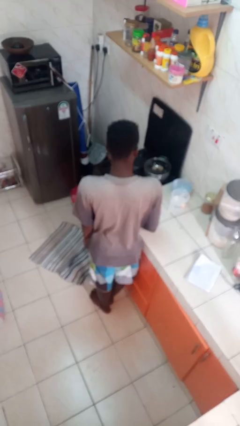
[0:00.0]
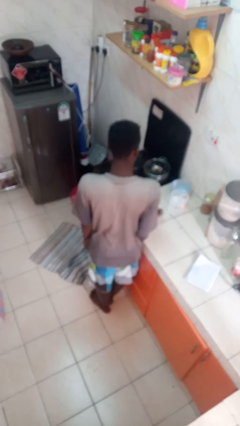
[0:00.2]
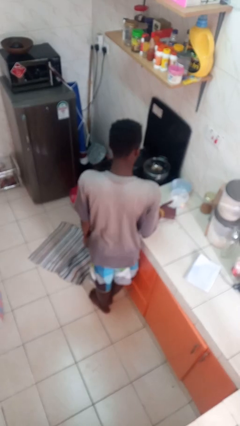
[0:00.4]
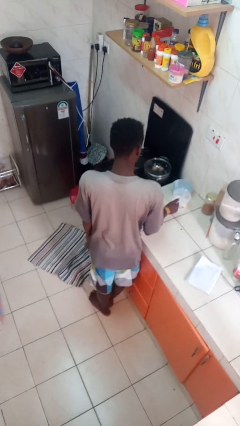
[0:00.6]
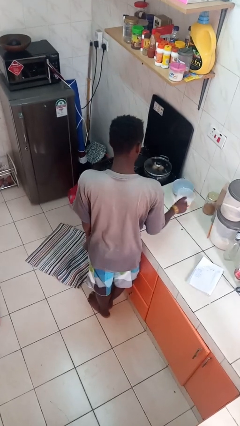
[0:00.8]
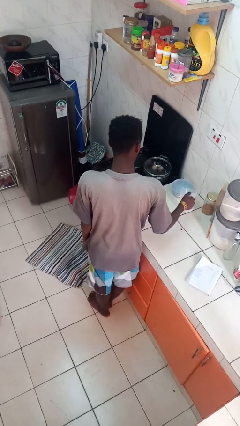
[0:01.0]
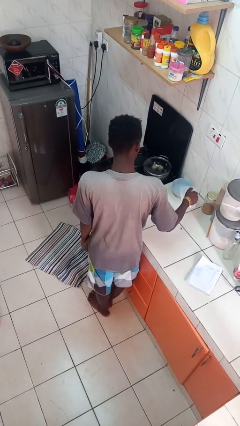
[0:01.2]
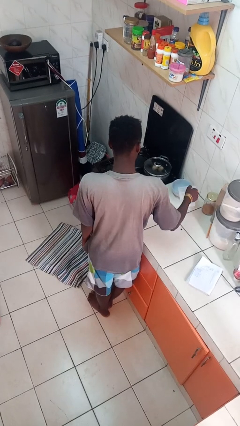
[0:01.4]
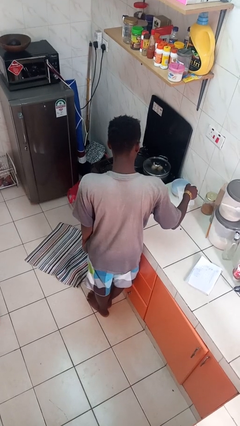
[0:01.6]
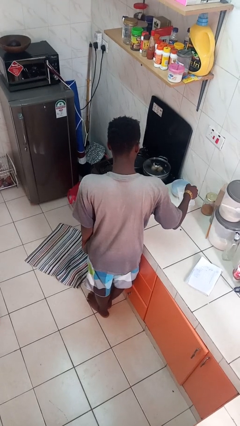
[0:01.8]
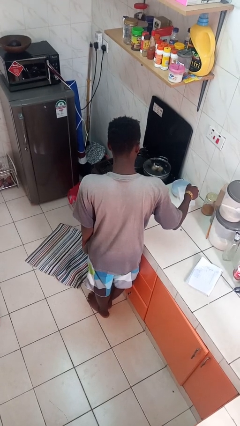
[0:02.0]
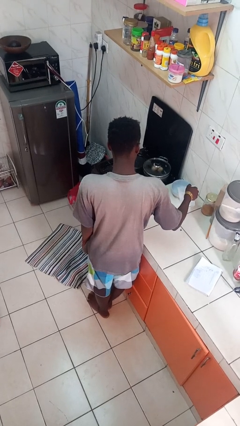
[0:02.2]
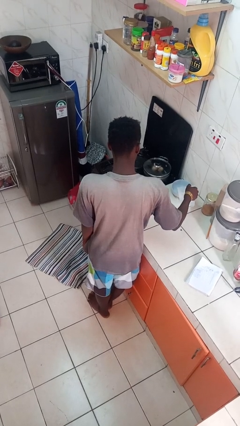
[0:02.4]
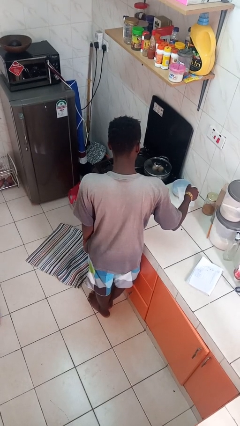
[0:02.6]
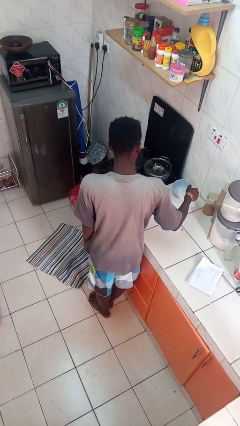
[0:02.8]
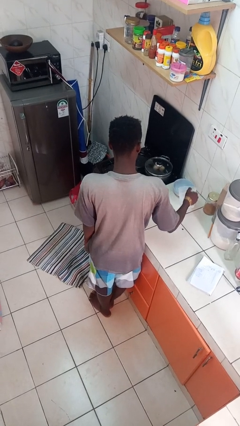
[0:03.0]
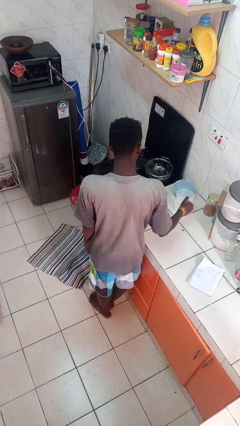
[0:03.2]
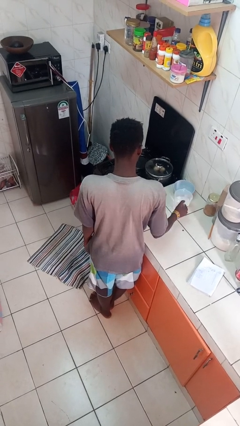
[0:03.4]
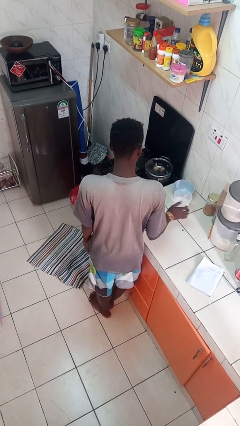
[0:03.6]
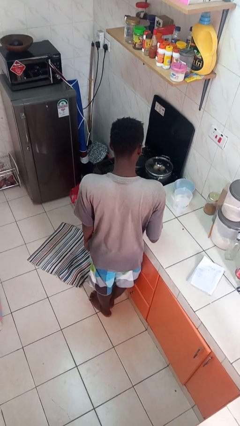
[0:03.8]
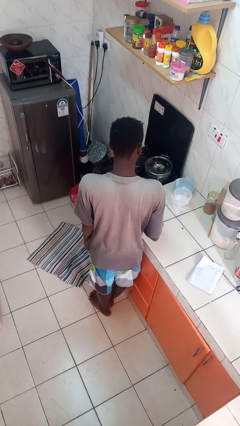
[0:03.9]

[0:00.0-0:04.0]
person pours into bowl

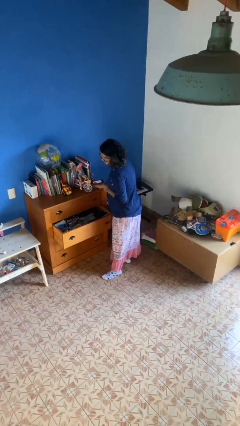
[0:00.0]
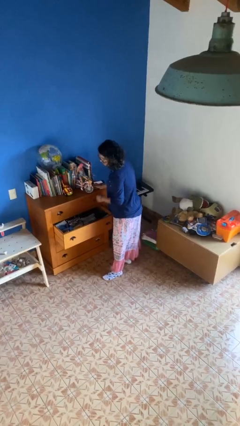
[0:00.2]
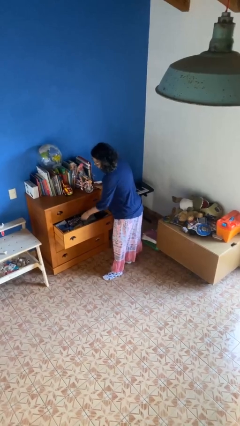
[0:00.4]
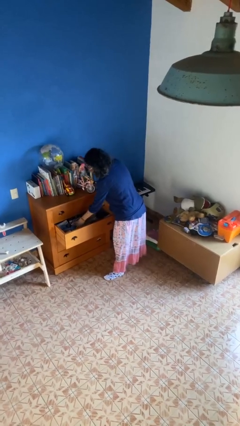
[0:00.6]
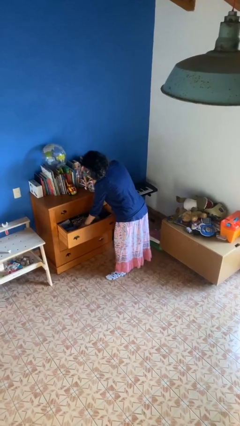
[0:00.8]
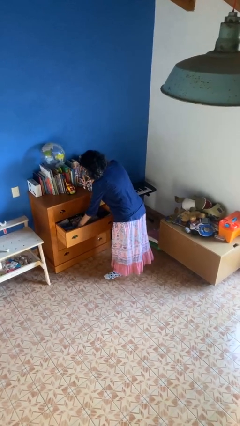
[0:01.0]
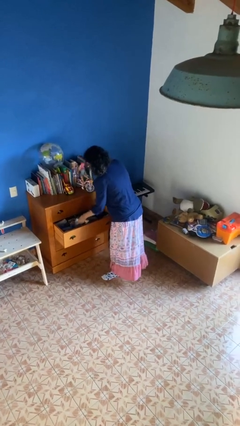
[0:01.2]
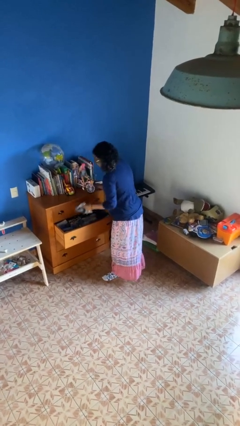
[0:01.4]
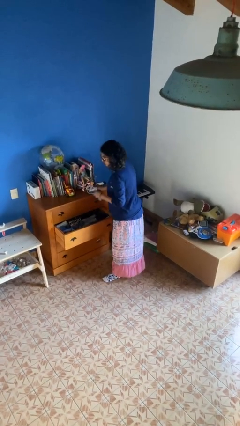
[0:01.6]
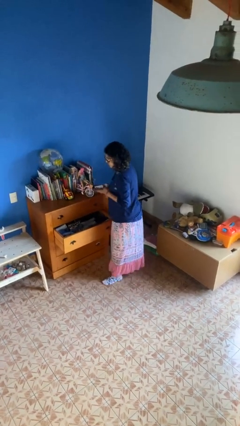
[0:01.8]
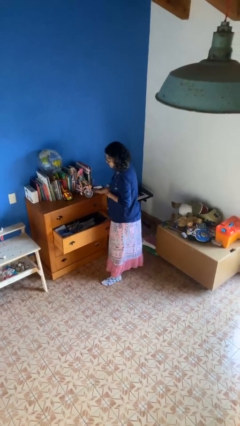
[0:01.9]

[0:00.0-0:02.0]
person takes clothes from dresser

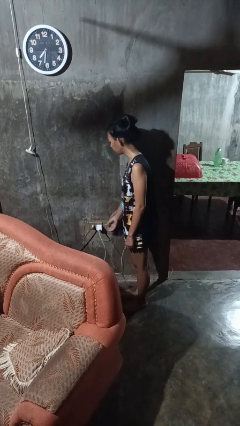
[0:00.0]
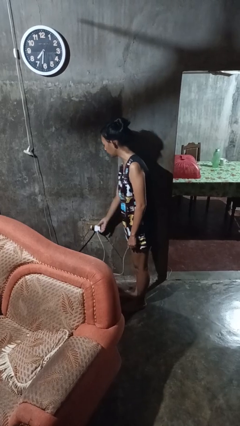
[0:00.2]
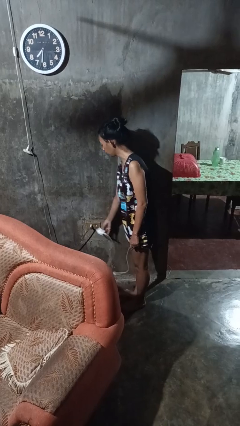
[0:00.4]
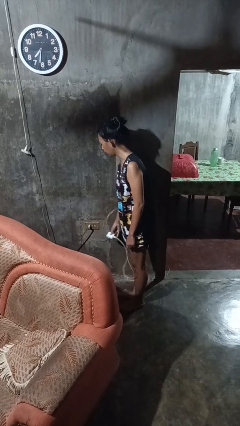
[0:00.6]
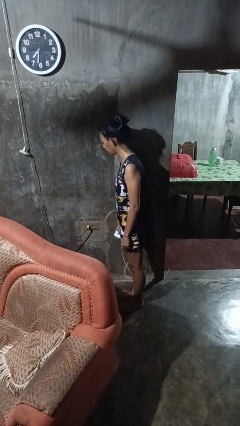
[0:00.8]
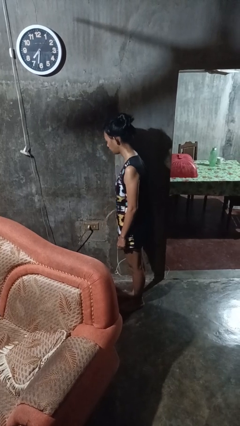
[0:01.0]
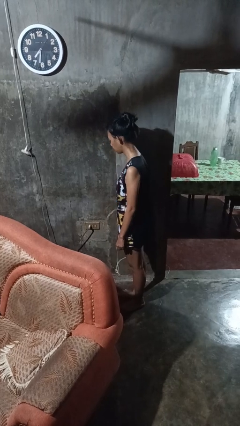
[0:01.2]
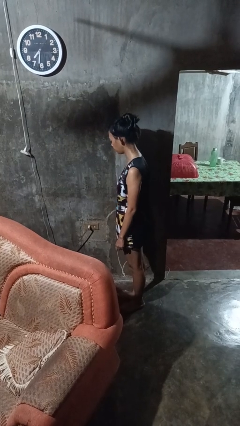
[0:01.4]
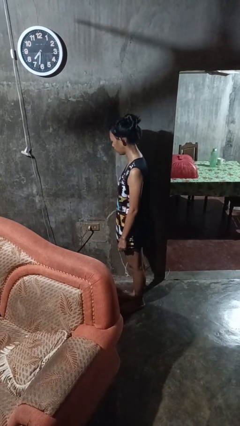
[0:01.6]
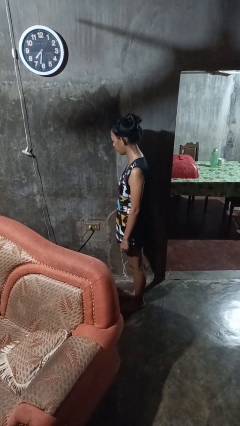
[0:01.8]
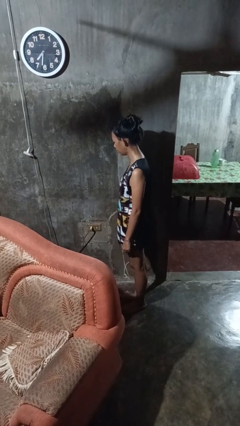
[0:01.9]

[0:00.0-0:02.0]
person unplugs from electrical socket

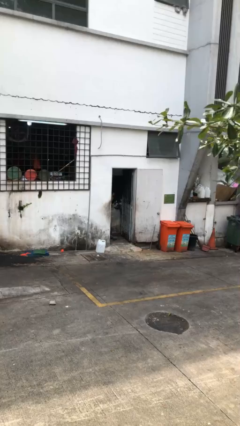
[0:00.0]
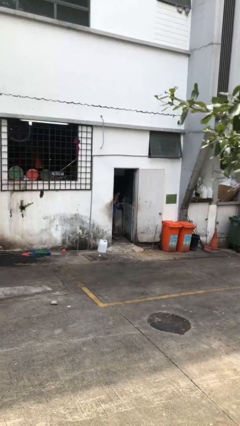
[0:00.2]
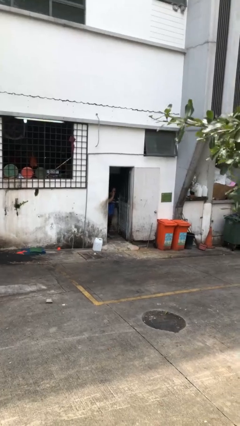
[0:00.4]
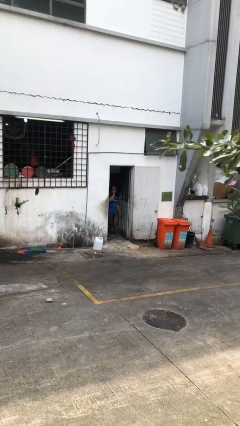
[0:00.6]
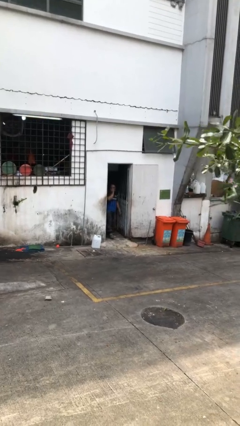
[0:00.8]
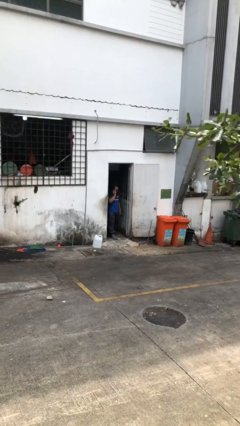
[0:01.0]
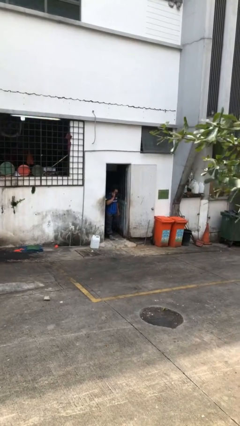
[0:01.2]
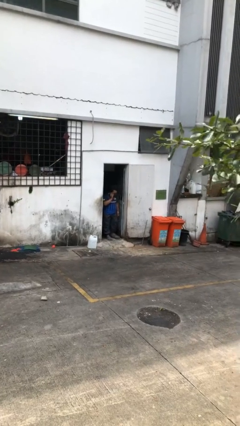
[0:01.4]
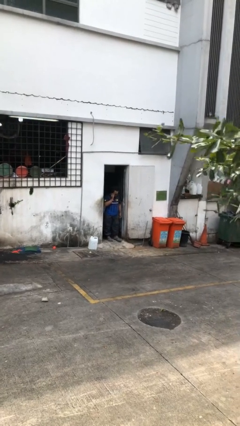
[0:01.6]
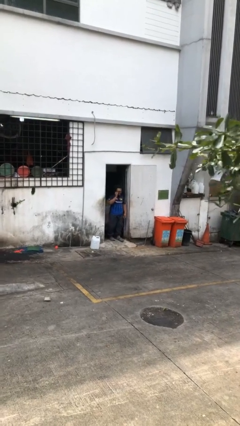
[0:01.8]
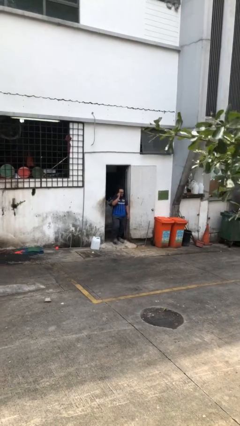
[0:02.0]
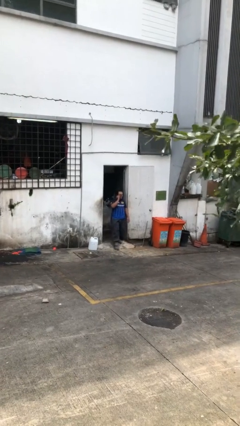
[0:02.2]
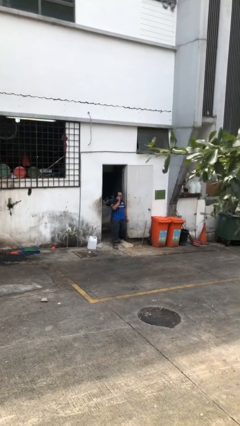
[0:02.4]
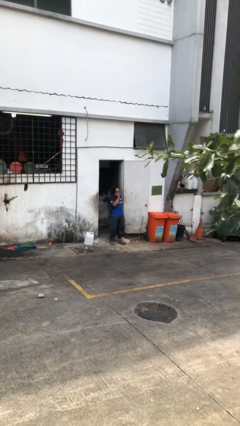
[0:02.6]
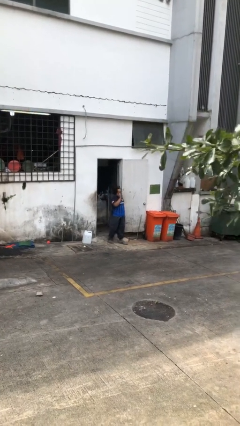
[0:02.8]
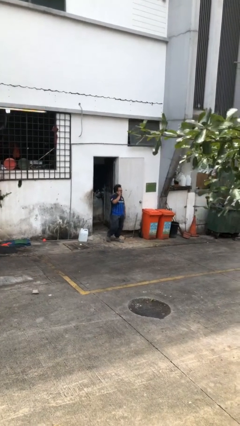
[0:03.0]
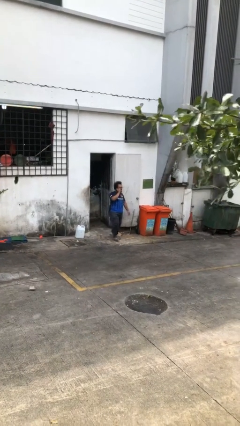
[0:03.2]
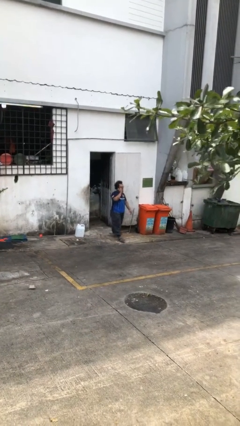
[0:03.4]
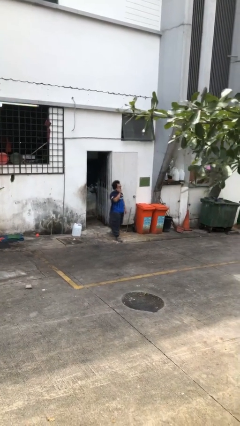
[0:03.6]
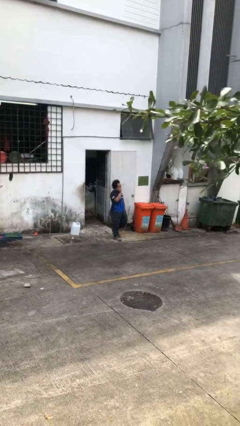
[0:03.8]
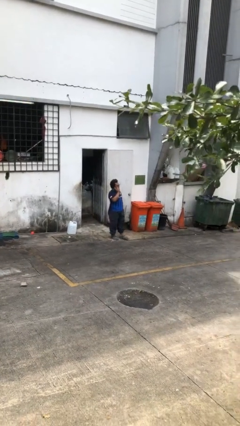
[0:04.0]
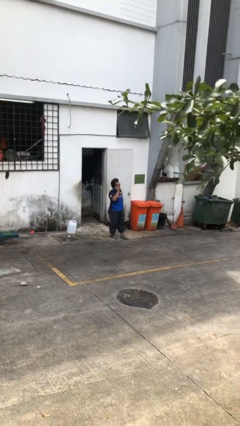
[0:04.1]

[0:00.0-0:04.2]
person enters scene through structure

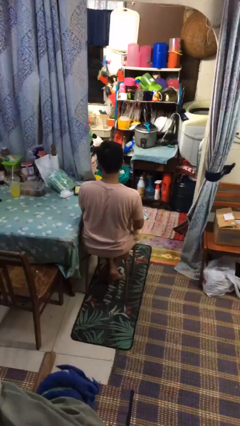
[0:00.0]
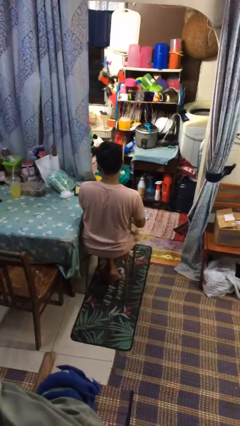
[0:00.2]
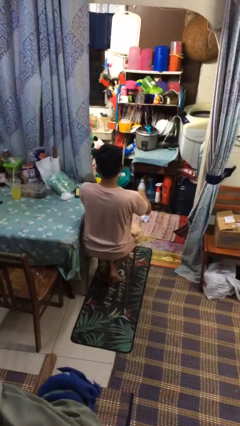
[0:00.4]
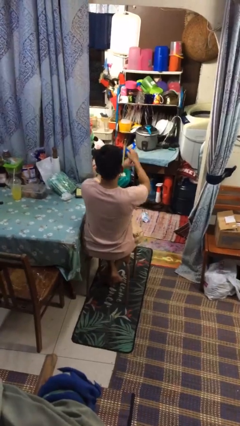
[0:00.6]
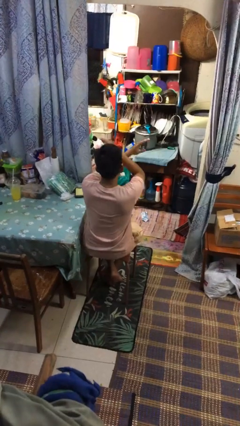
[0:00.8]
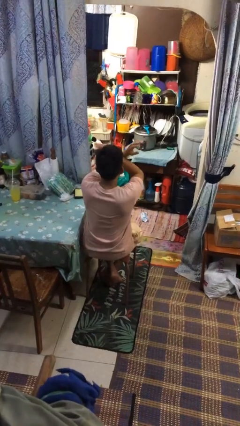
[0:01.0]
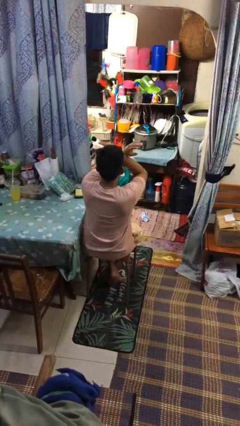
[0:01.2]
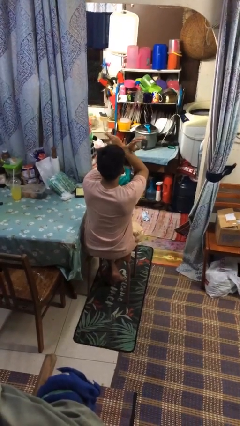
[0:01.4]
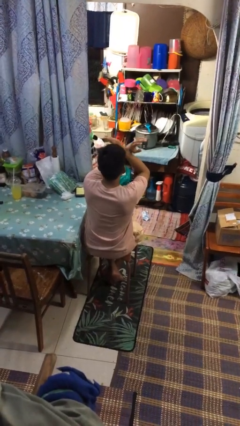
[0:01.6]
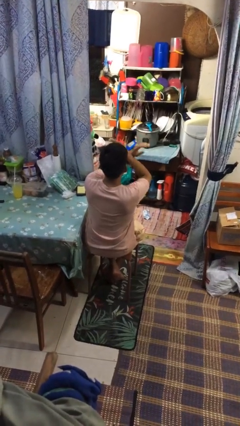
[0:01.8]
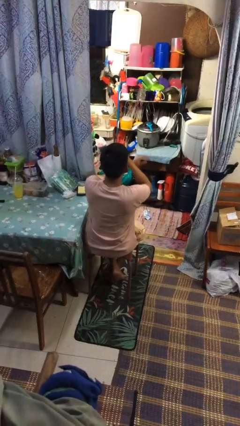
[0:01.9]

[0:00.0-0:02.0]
person gestures arms x

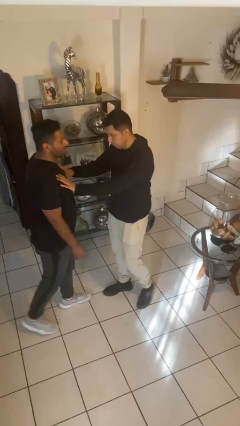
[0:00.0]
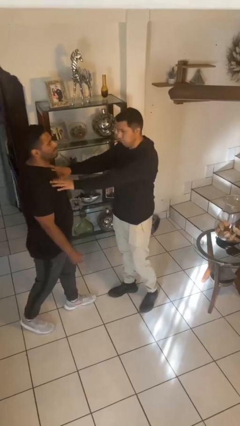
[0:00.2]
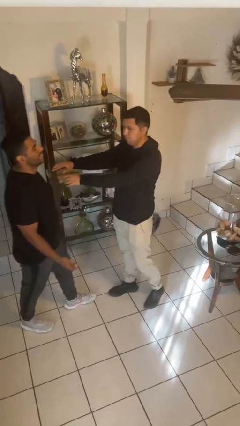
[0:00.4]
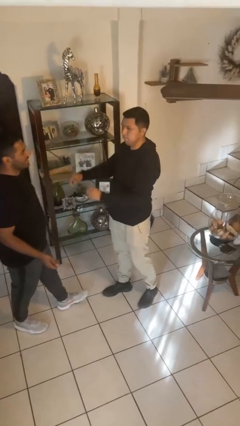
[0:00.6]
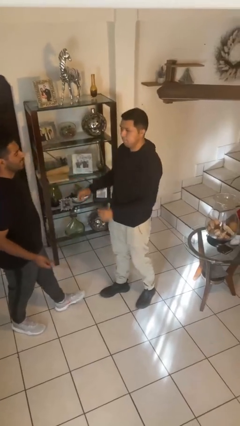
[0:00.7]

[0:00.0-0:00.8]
person shoves person

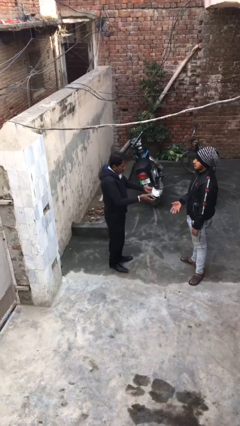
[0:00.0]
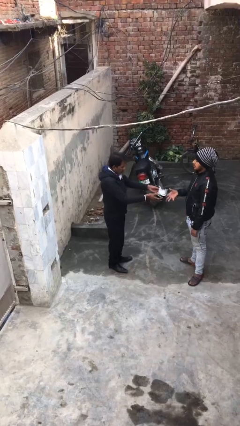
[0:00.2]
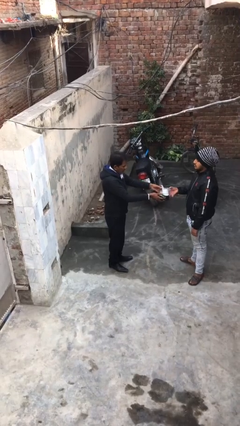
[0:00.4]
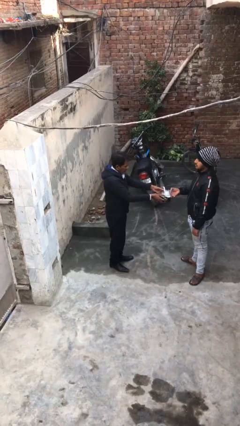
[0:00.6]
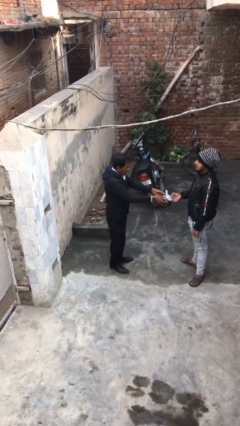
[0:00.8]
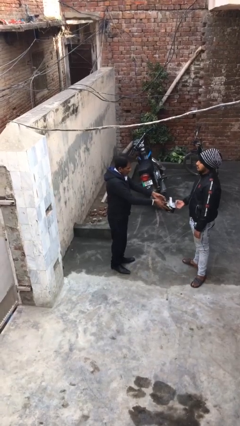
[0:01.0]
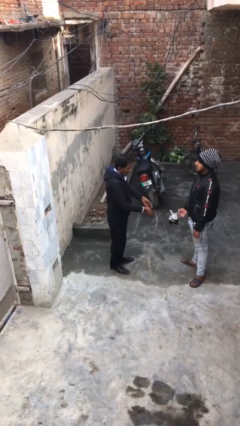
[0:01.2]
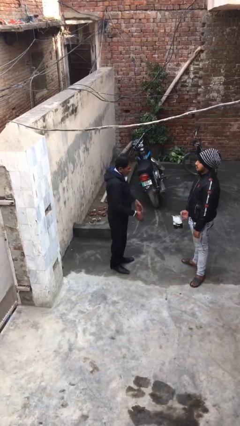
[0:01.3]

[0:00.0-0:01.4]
person transfers object to person

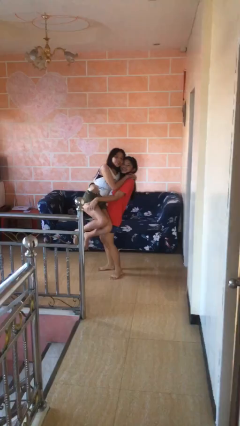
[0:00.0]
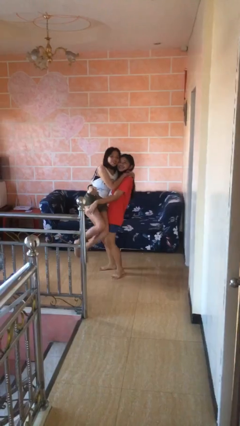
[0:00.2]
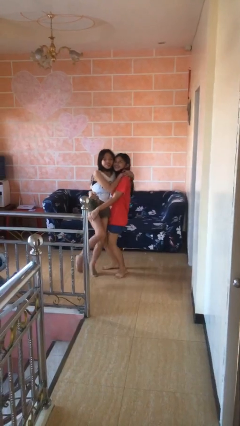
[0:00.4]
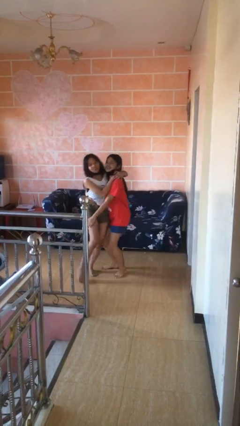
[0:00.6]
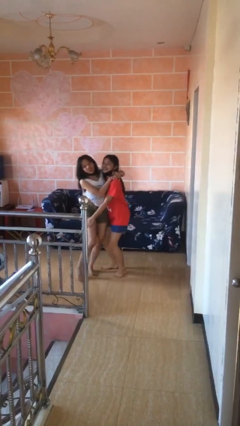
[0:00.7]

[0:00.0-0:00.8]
person puts down person
